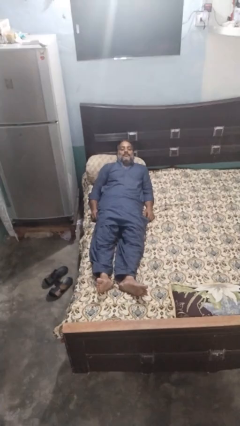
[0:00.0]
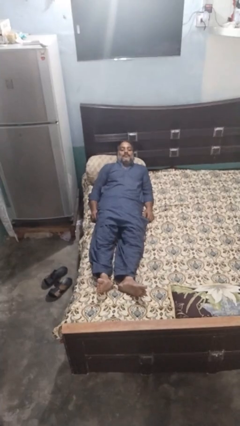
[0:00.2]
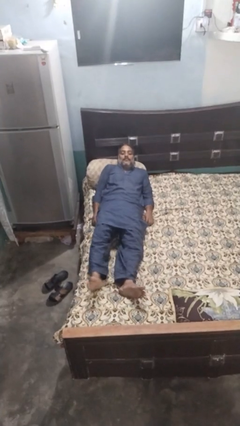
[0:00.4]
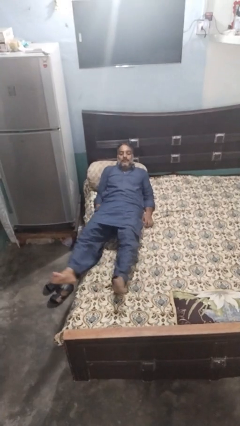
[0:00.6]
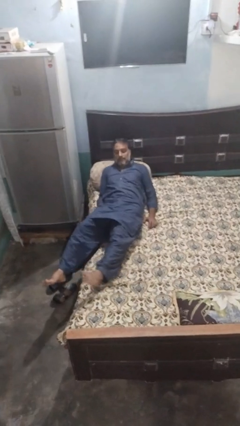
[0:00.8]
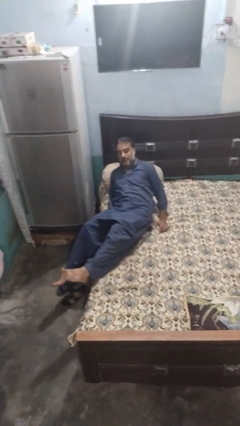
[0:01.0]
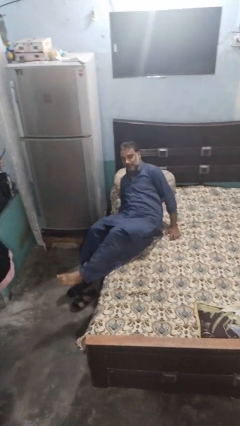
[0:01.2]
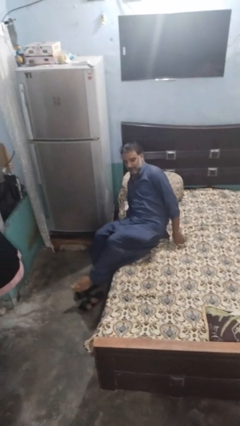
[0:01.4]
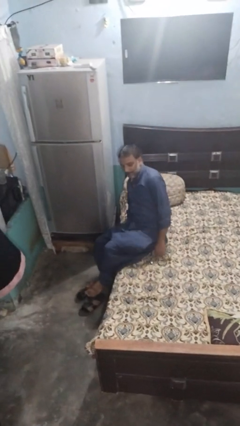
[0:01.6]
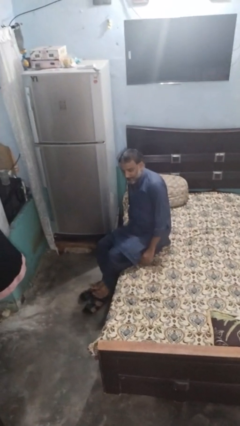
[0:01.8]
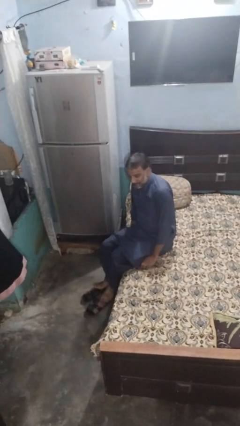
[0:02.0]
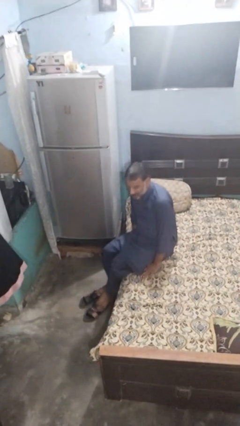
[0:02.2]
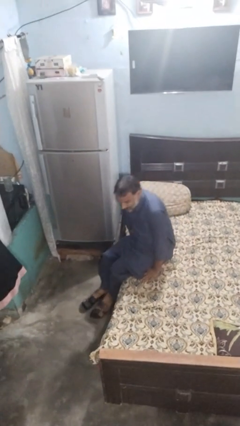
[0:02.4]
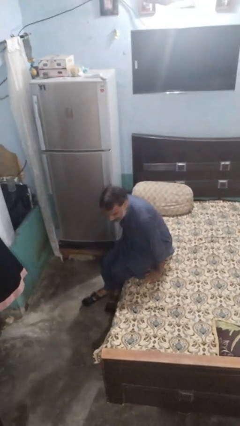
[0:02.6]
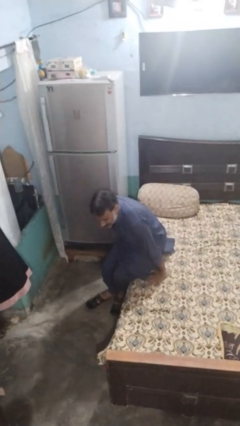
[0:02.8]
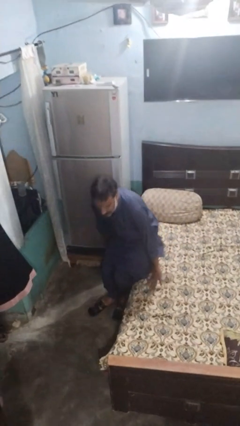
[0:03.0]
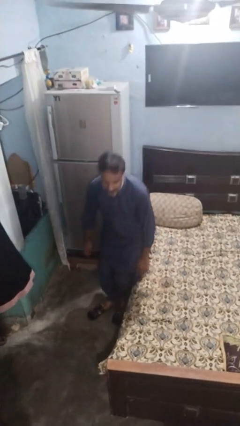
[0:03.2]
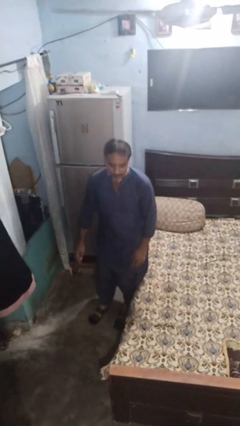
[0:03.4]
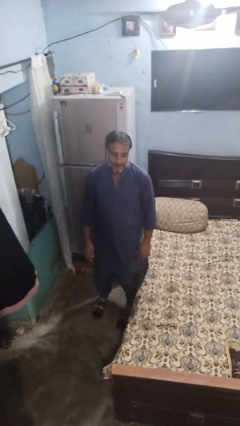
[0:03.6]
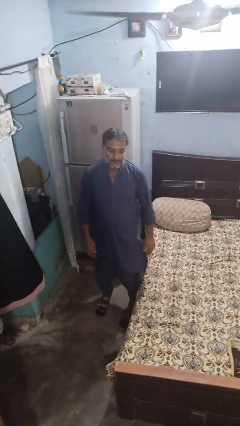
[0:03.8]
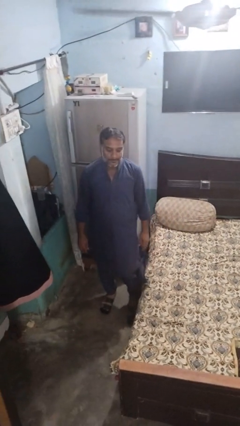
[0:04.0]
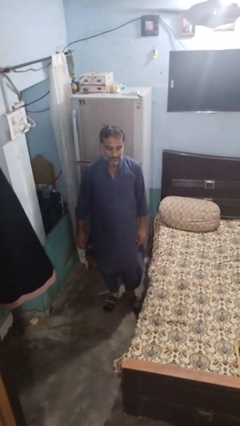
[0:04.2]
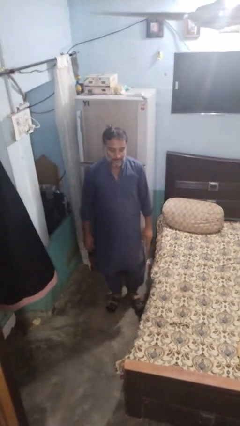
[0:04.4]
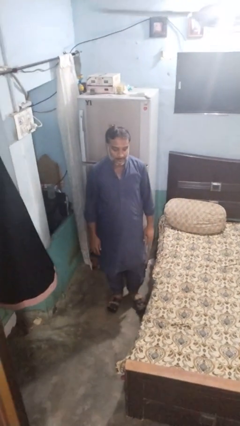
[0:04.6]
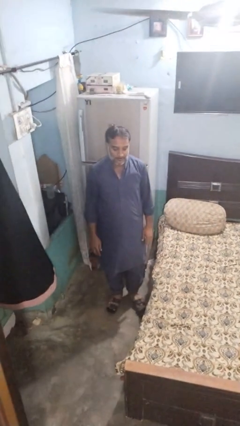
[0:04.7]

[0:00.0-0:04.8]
person stands up

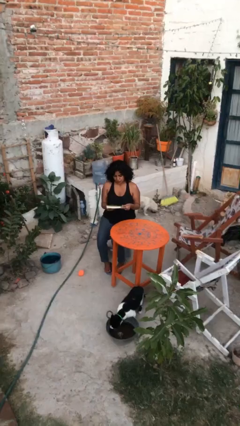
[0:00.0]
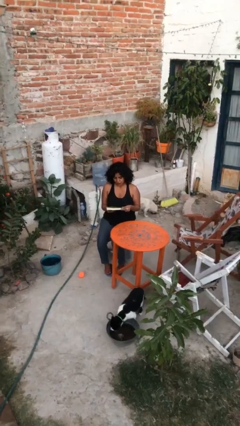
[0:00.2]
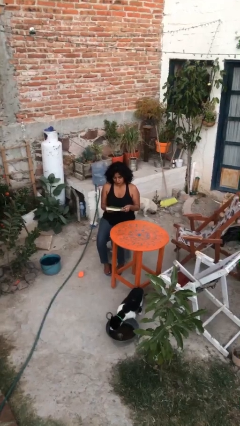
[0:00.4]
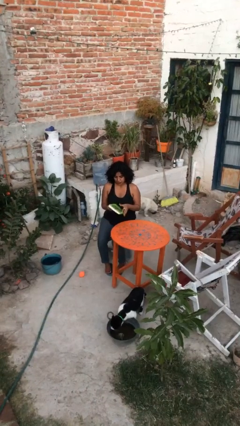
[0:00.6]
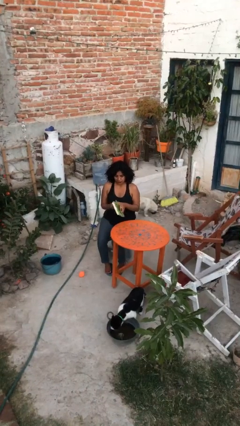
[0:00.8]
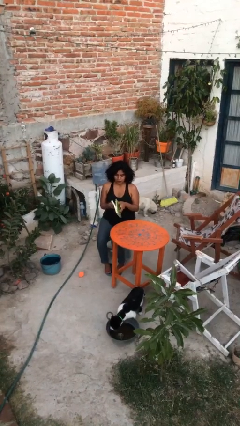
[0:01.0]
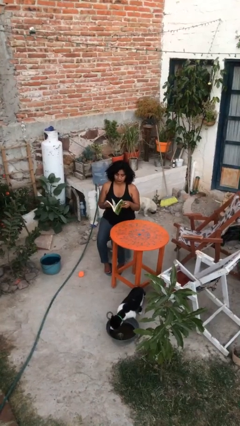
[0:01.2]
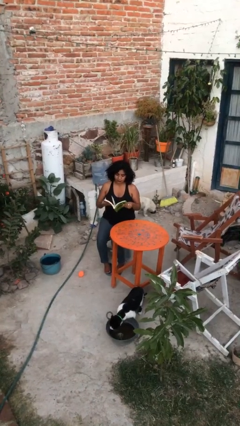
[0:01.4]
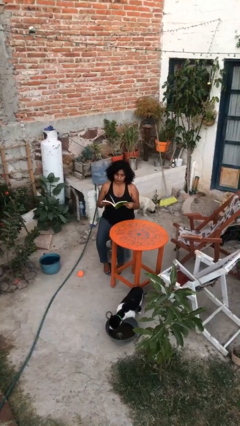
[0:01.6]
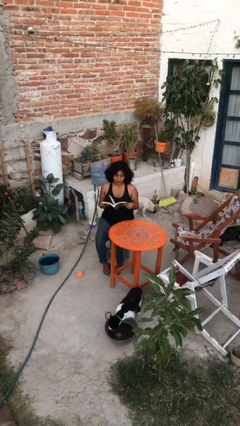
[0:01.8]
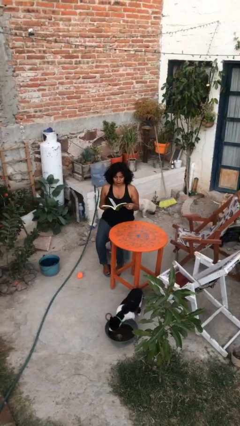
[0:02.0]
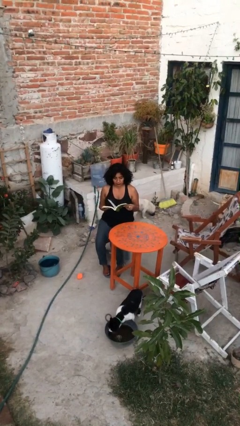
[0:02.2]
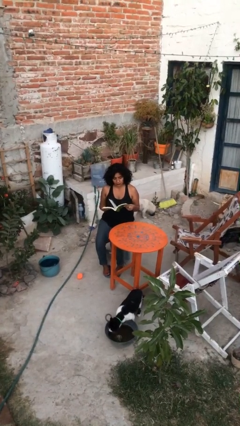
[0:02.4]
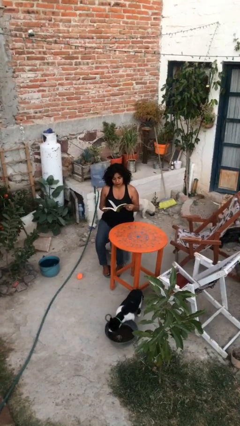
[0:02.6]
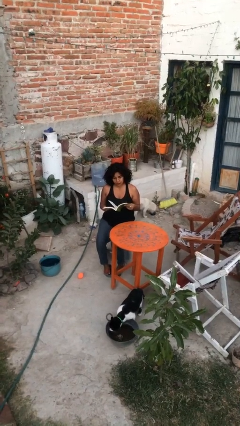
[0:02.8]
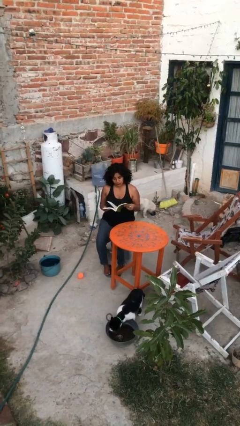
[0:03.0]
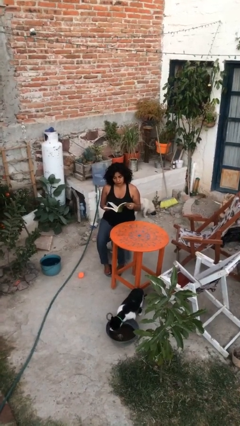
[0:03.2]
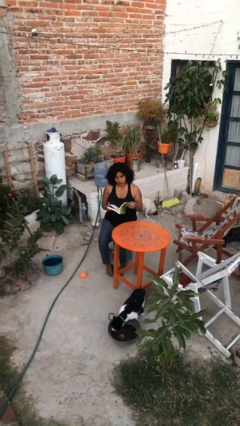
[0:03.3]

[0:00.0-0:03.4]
person reads document

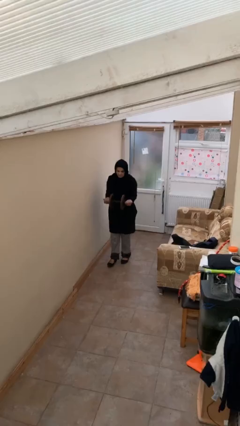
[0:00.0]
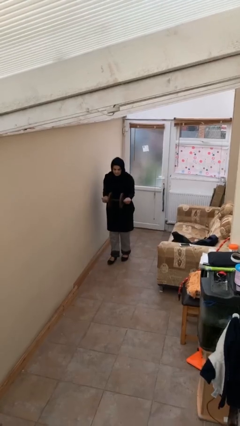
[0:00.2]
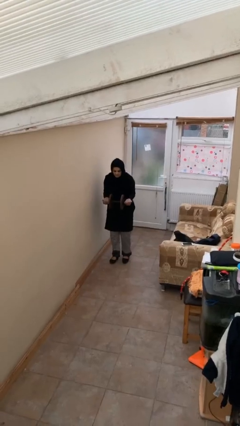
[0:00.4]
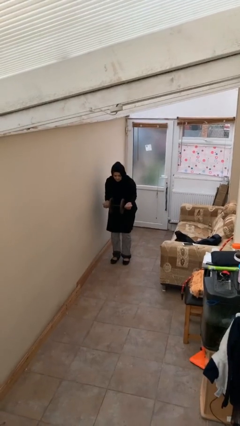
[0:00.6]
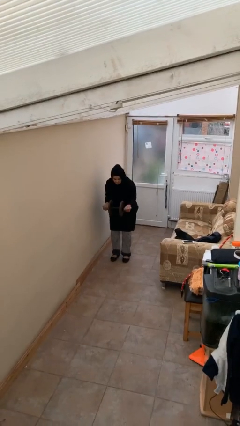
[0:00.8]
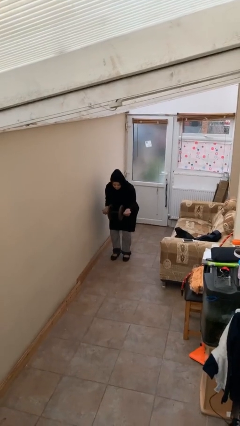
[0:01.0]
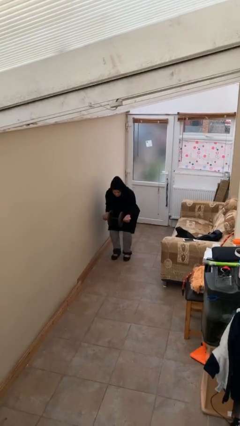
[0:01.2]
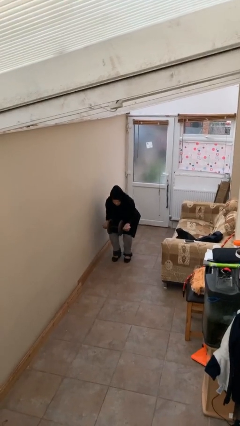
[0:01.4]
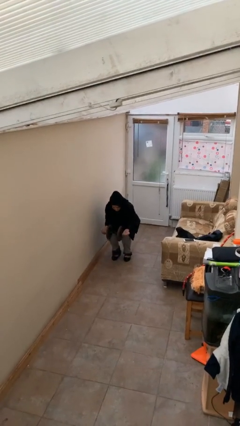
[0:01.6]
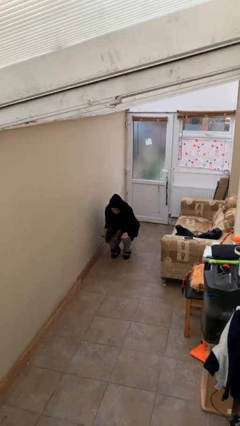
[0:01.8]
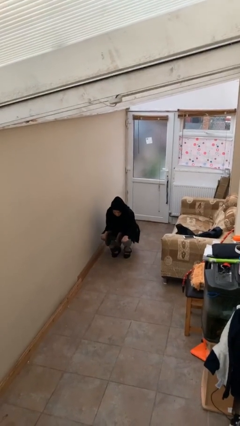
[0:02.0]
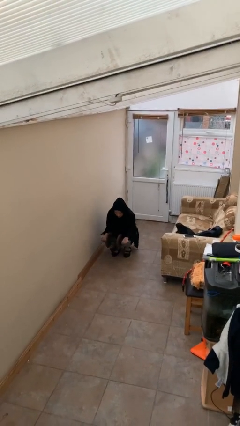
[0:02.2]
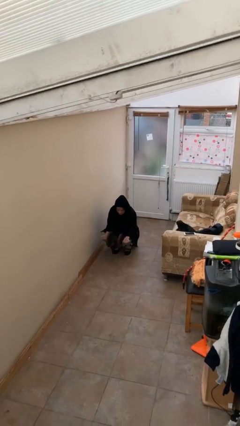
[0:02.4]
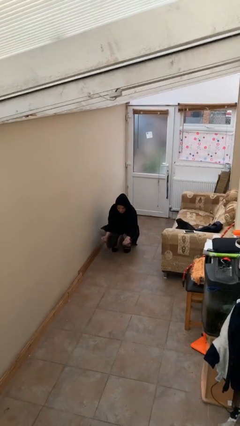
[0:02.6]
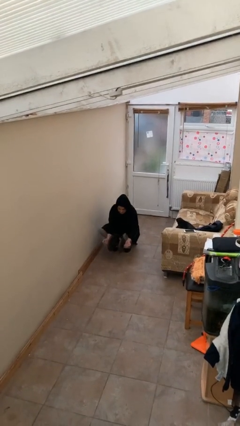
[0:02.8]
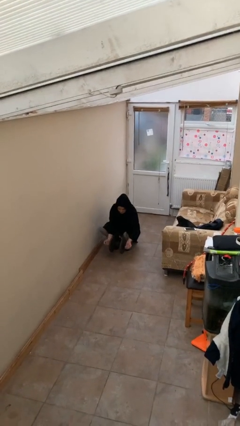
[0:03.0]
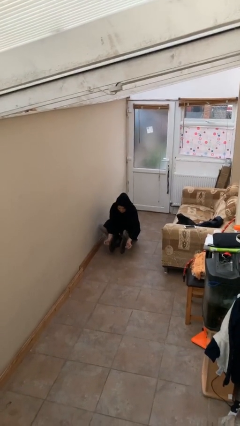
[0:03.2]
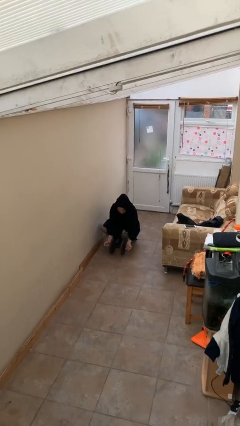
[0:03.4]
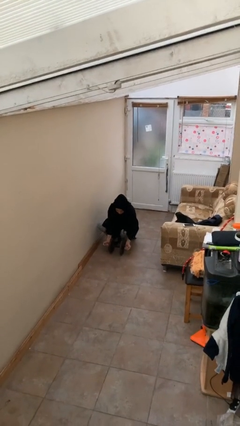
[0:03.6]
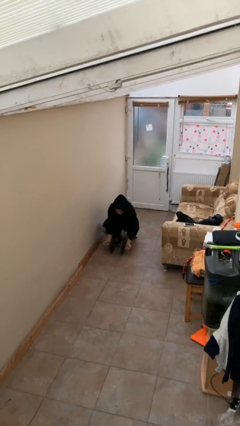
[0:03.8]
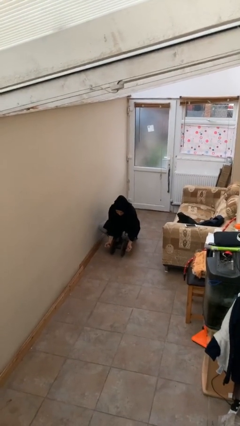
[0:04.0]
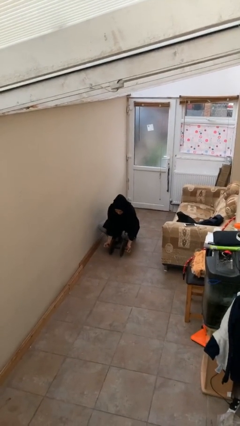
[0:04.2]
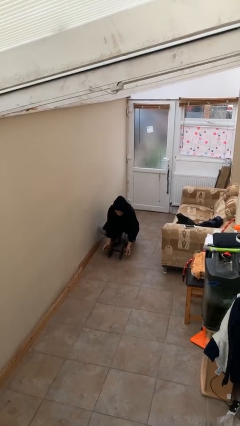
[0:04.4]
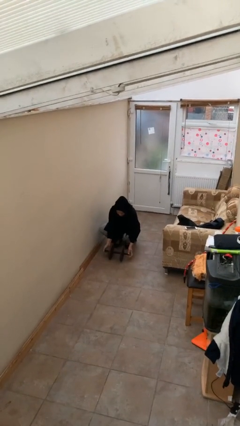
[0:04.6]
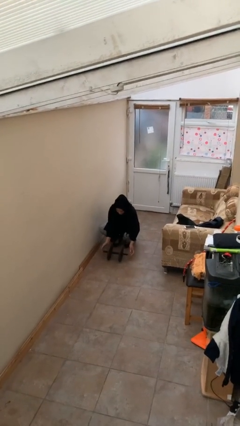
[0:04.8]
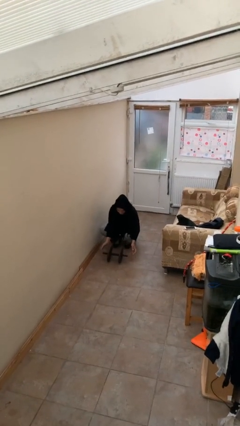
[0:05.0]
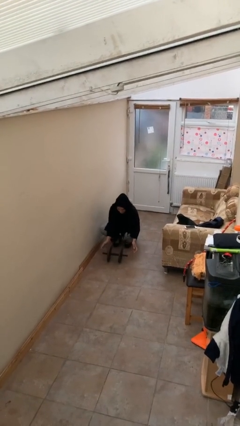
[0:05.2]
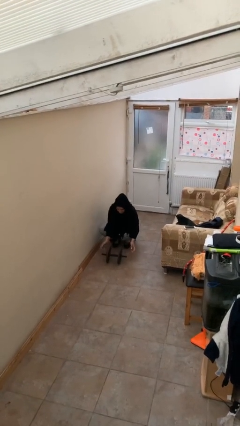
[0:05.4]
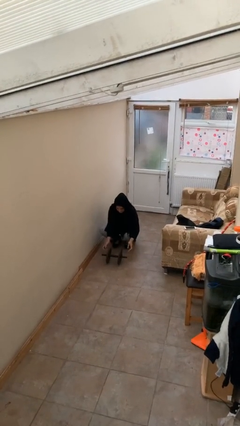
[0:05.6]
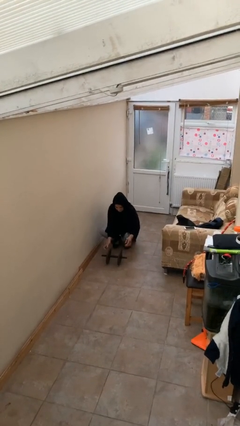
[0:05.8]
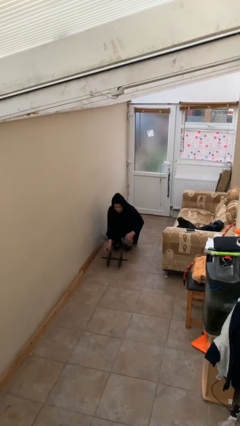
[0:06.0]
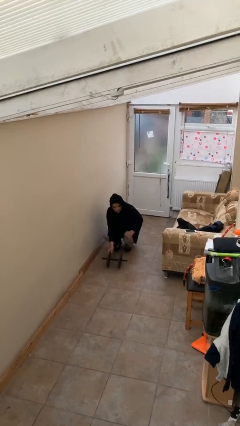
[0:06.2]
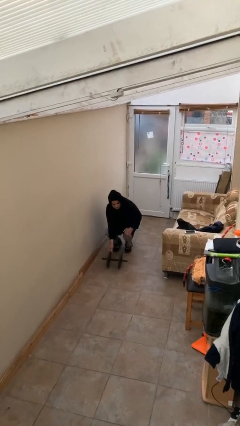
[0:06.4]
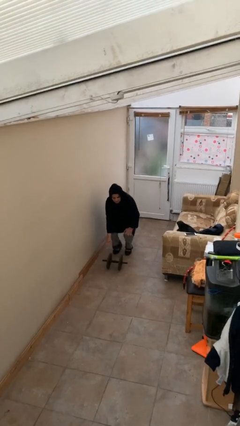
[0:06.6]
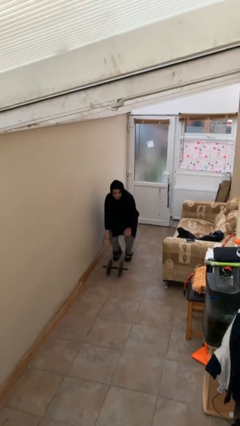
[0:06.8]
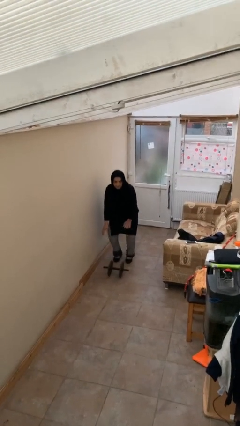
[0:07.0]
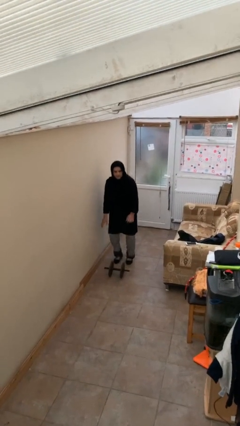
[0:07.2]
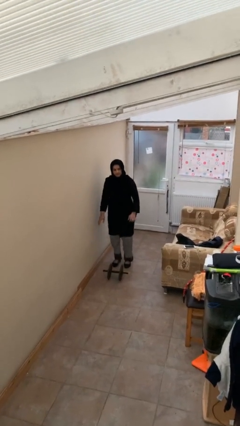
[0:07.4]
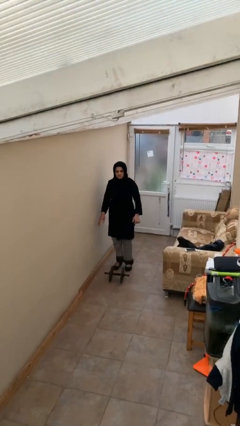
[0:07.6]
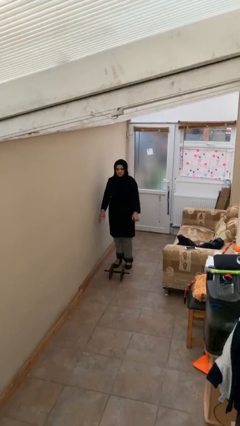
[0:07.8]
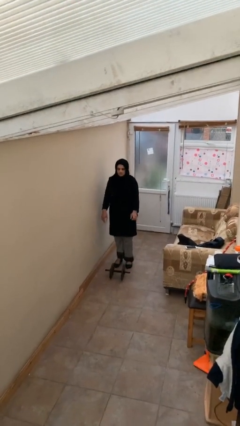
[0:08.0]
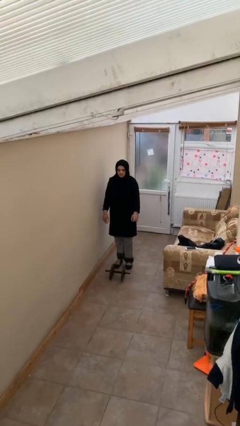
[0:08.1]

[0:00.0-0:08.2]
person puts down object on floor

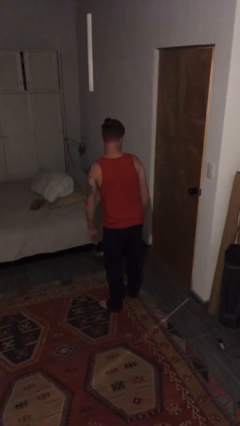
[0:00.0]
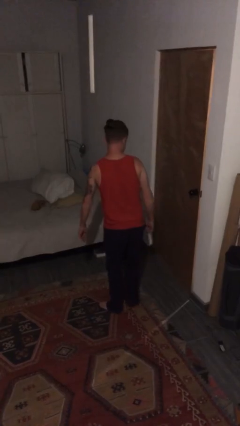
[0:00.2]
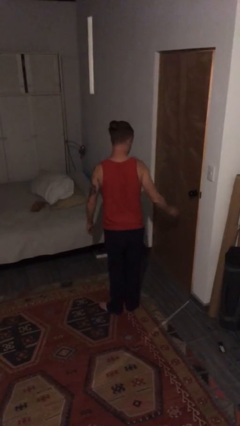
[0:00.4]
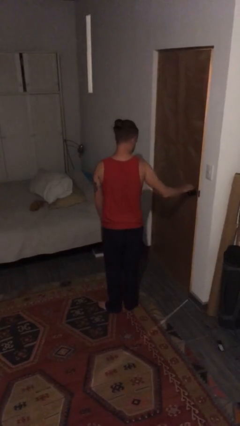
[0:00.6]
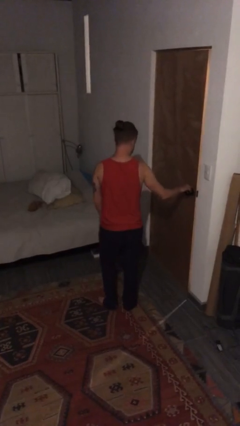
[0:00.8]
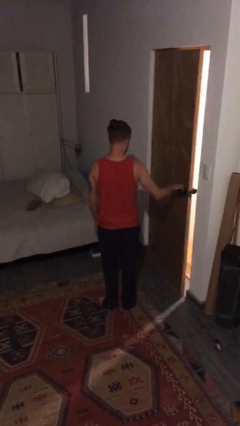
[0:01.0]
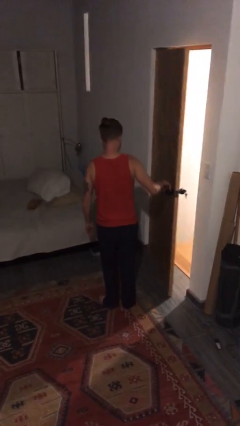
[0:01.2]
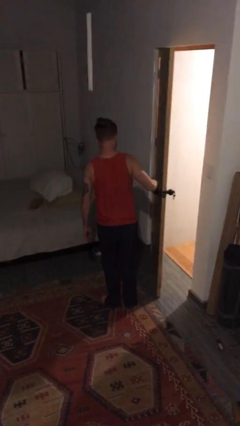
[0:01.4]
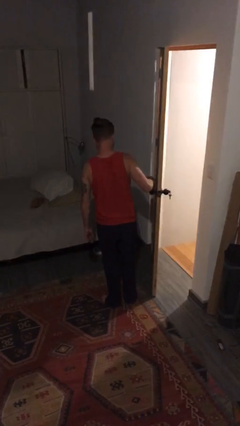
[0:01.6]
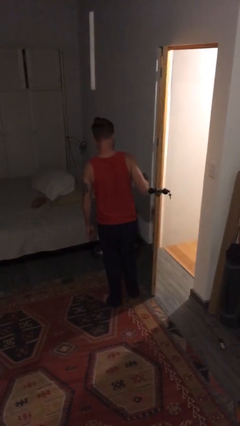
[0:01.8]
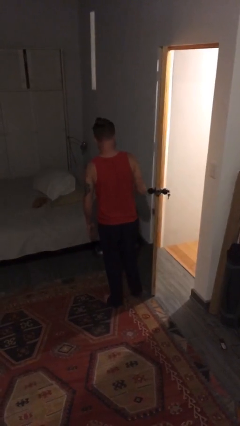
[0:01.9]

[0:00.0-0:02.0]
person opens facility door
